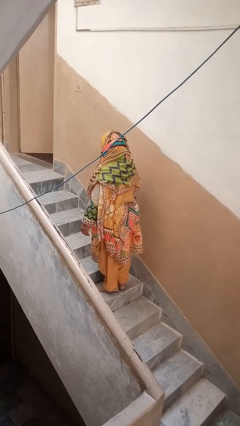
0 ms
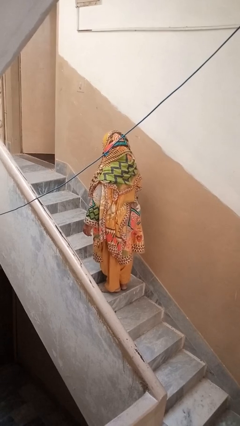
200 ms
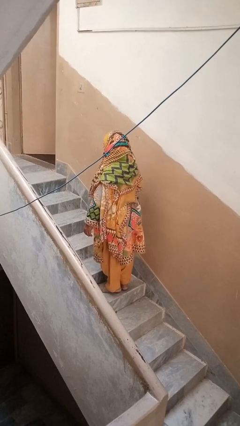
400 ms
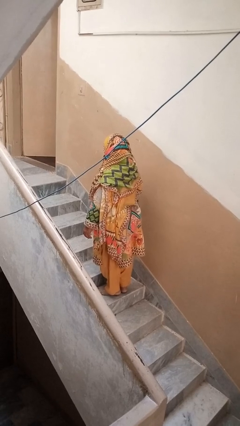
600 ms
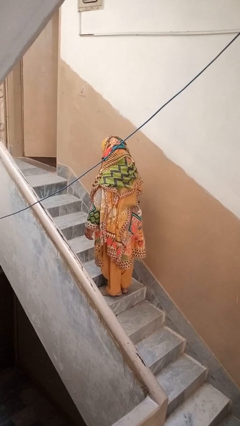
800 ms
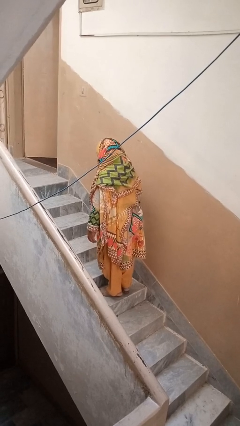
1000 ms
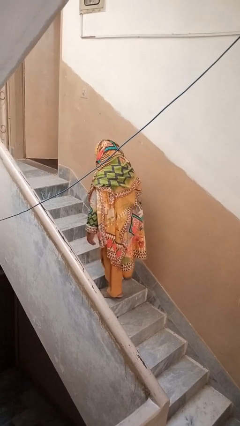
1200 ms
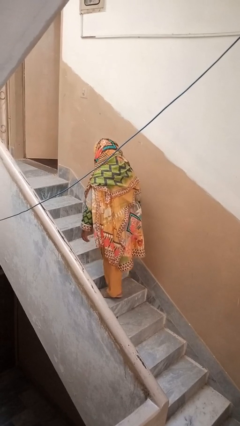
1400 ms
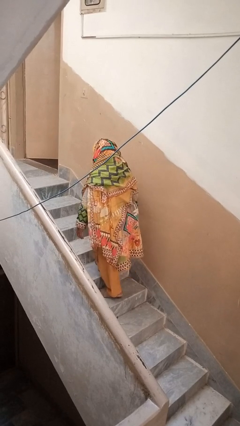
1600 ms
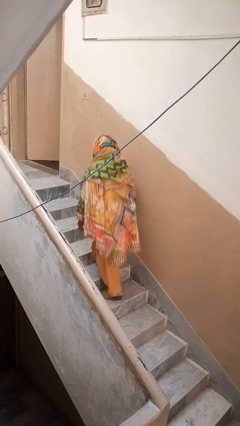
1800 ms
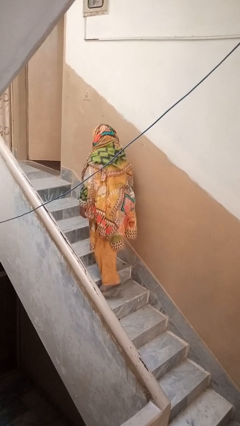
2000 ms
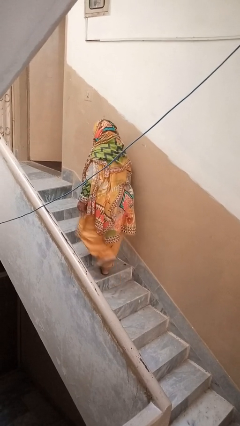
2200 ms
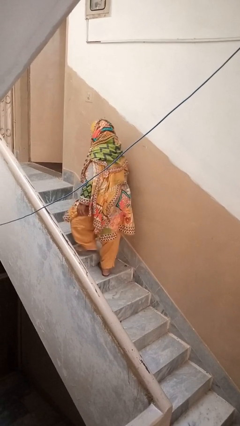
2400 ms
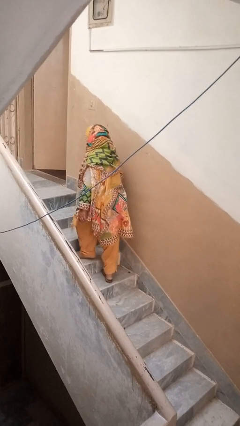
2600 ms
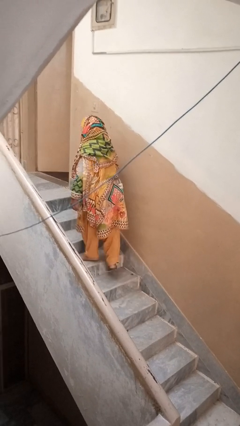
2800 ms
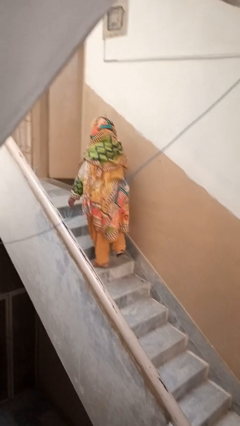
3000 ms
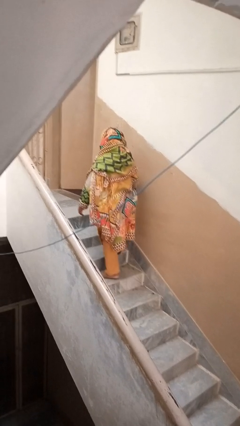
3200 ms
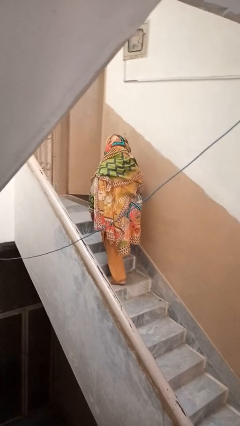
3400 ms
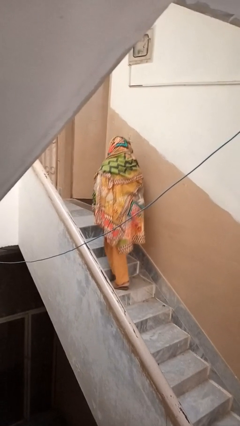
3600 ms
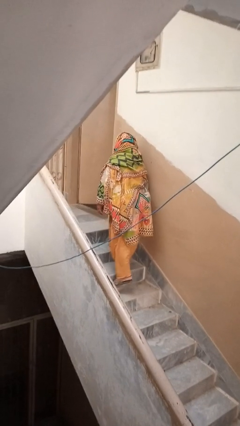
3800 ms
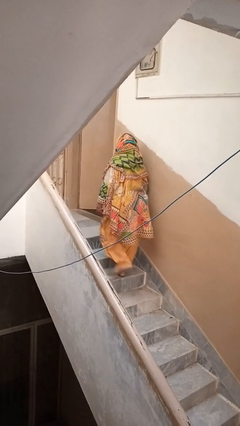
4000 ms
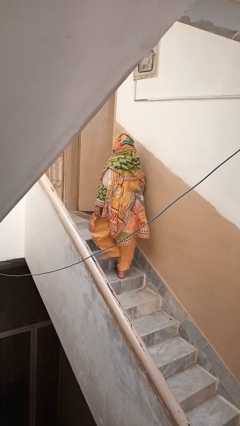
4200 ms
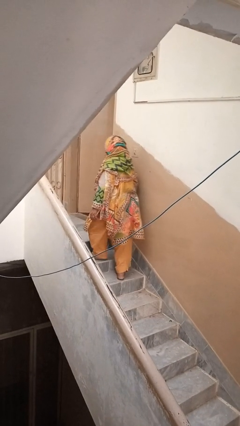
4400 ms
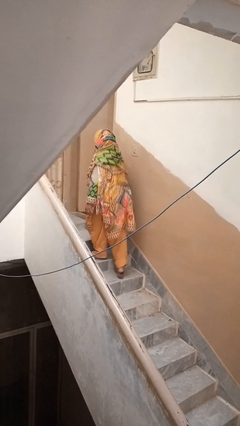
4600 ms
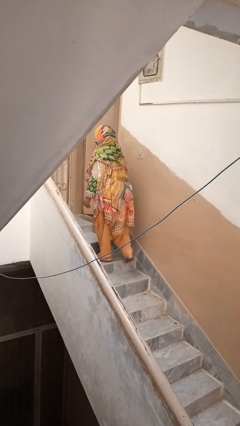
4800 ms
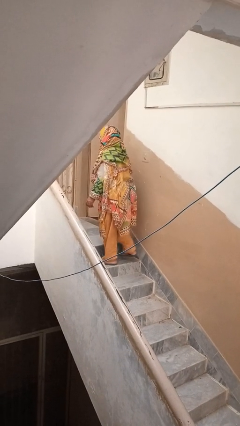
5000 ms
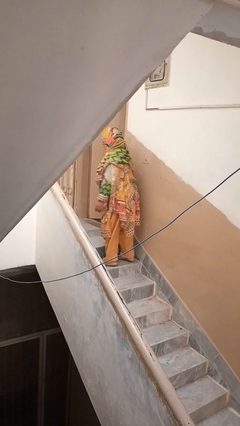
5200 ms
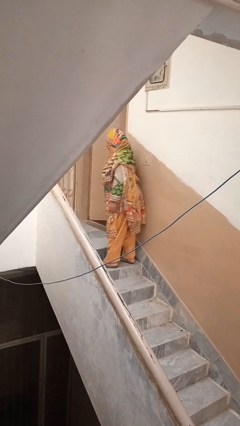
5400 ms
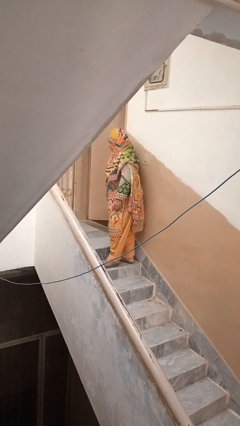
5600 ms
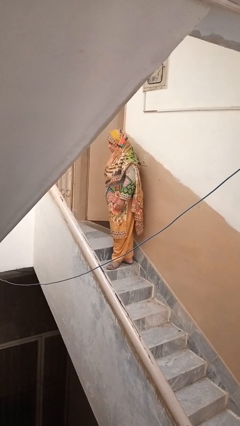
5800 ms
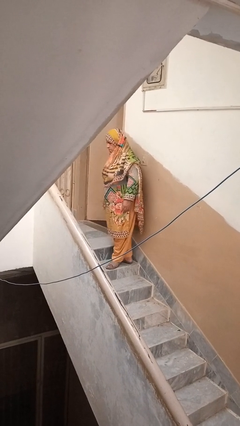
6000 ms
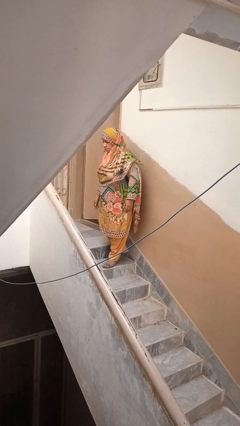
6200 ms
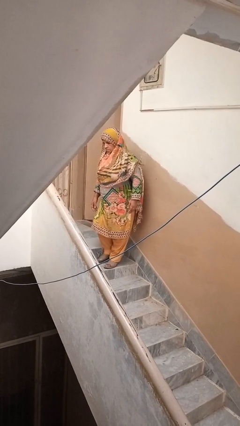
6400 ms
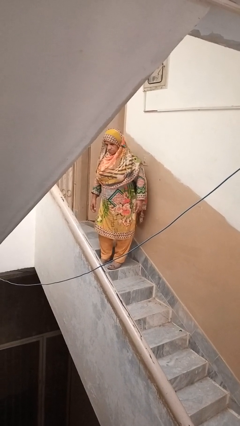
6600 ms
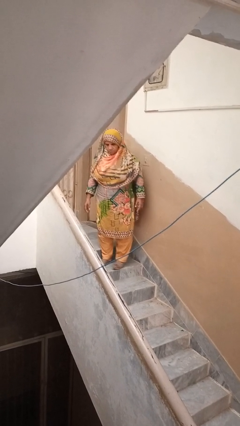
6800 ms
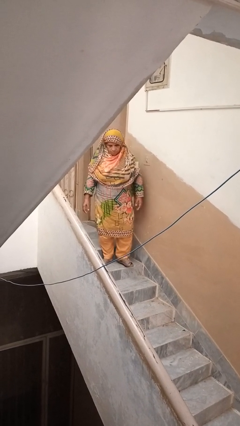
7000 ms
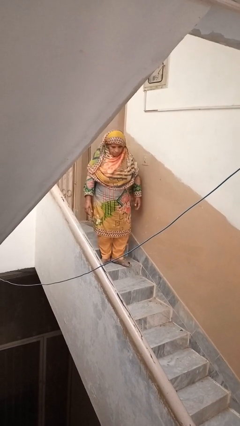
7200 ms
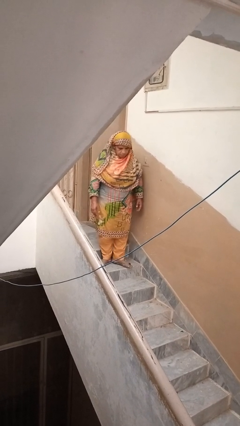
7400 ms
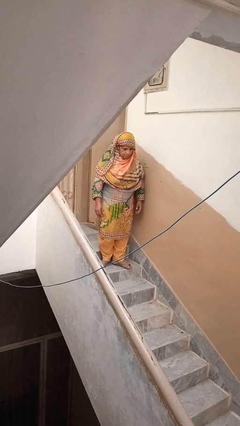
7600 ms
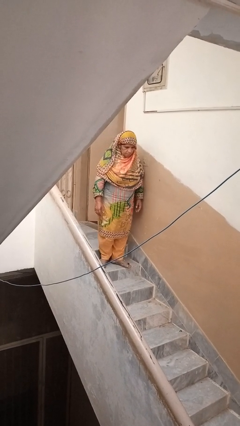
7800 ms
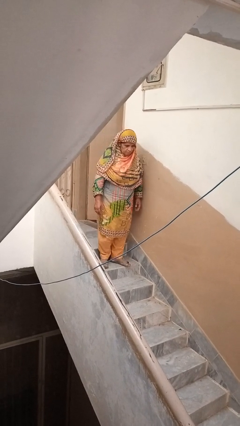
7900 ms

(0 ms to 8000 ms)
person climbs up stairs

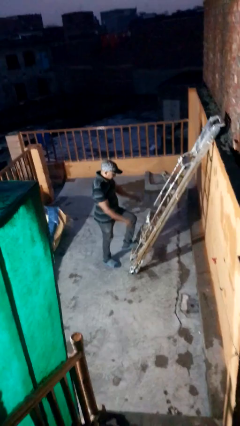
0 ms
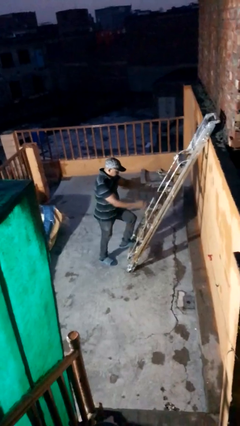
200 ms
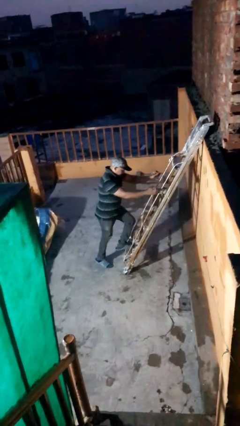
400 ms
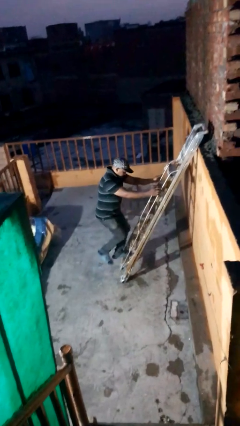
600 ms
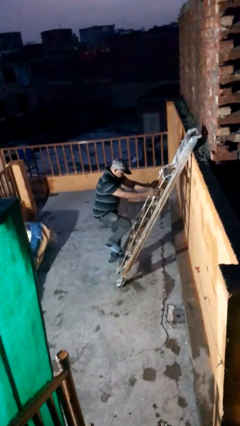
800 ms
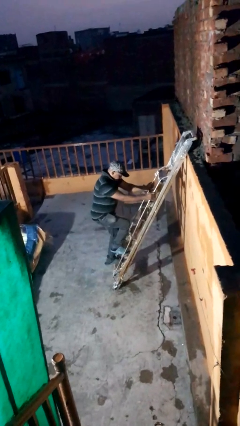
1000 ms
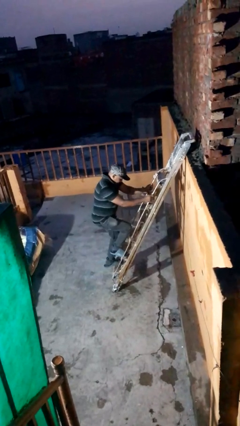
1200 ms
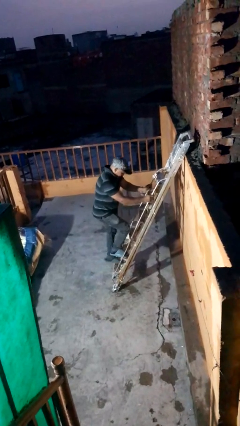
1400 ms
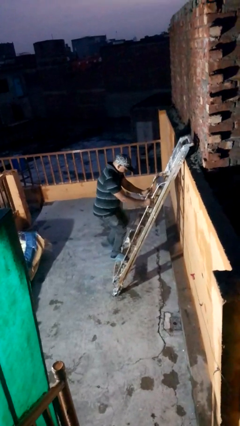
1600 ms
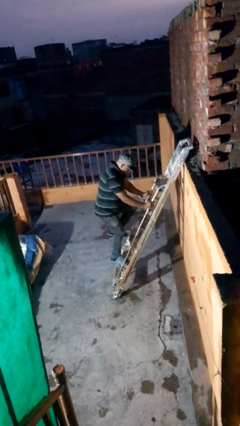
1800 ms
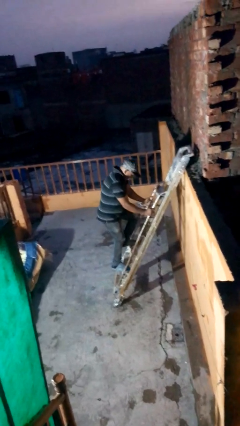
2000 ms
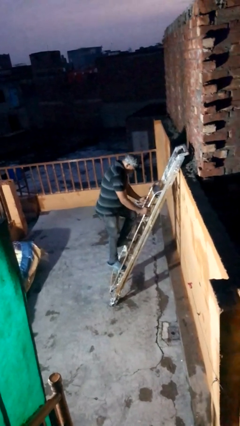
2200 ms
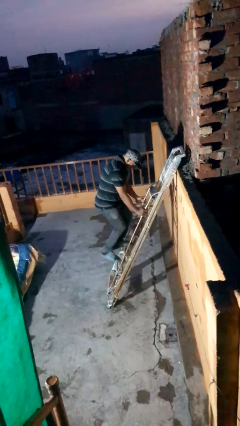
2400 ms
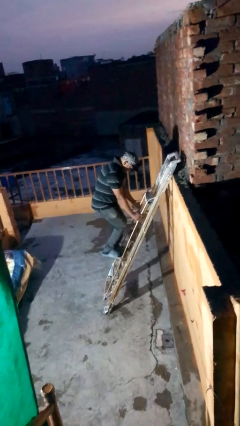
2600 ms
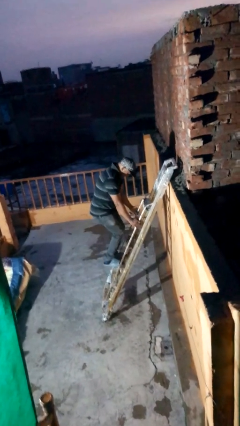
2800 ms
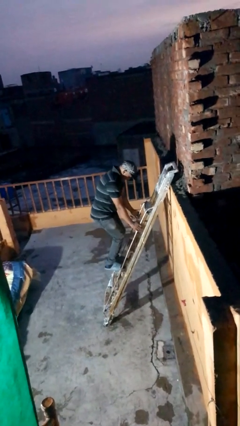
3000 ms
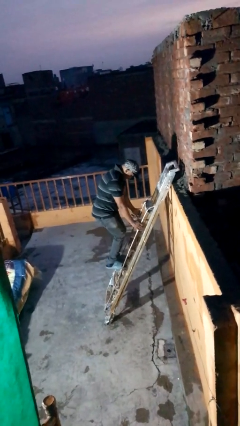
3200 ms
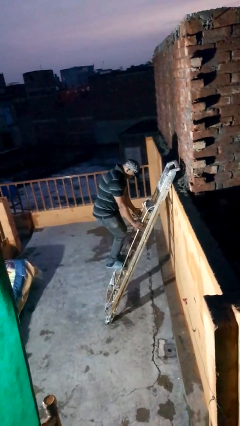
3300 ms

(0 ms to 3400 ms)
person climbs up ladder

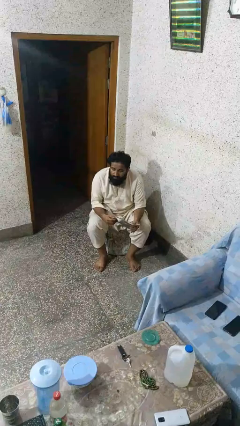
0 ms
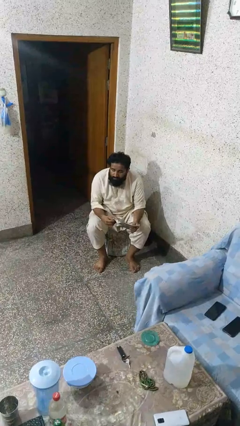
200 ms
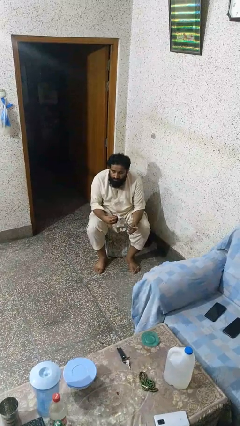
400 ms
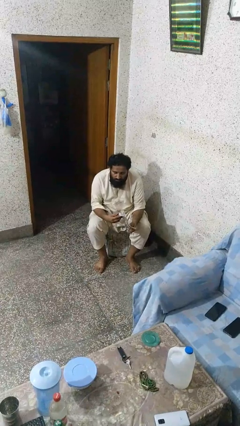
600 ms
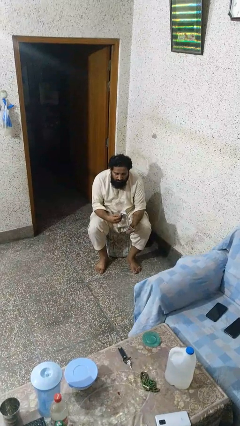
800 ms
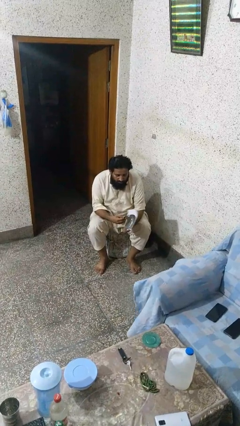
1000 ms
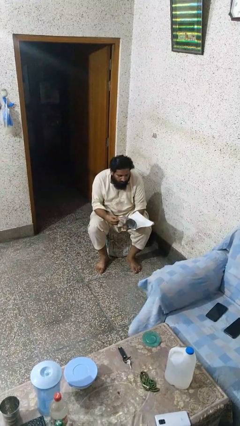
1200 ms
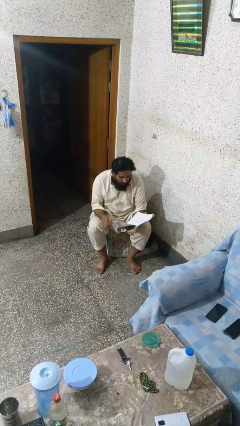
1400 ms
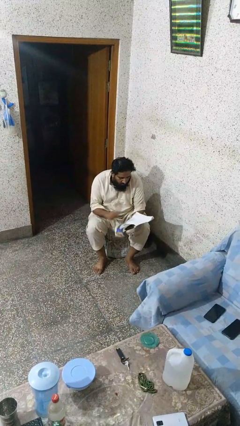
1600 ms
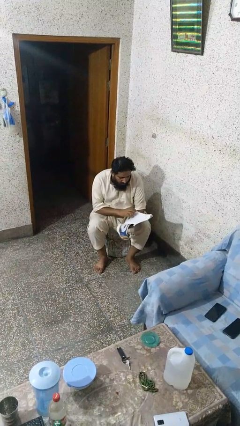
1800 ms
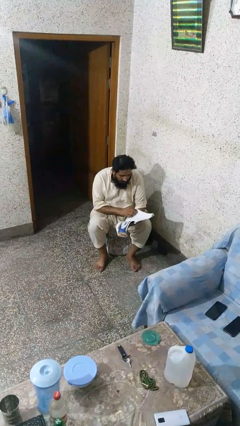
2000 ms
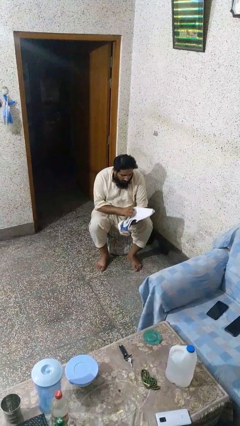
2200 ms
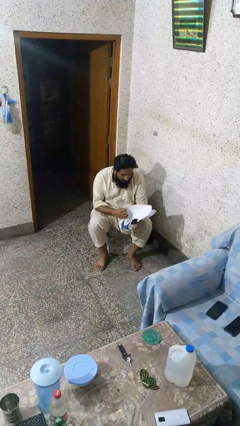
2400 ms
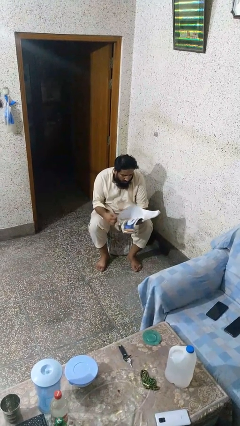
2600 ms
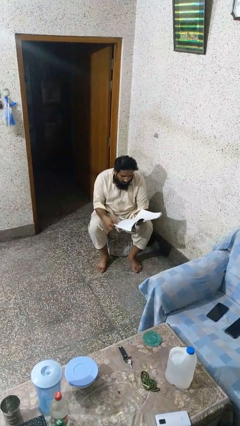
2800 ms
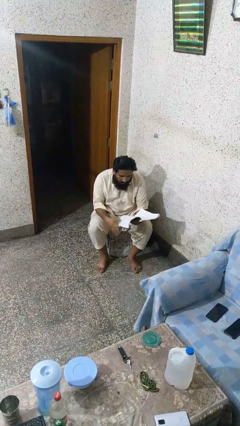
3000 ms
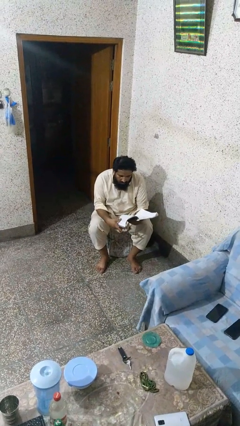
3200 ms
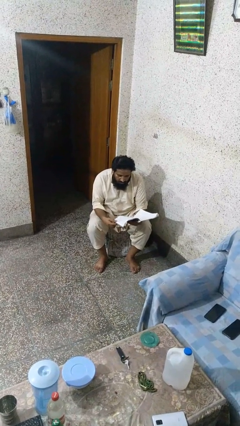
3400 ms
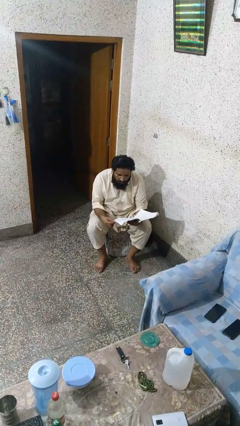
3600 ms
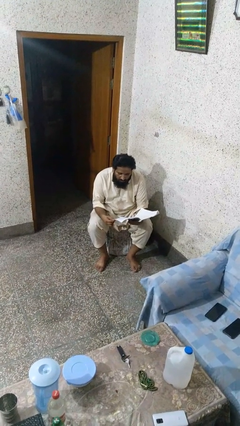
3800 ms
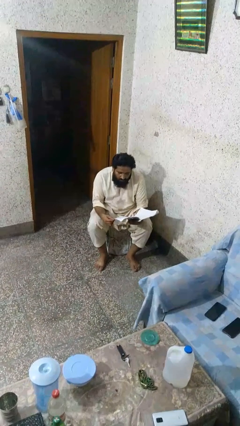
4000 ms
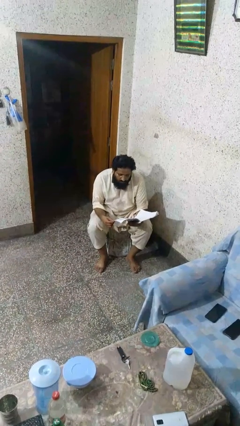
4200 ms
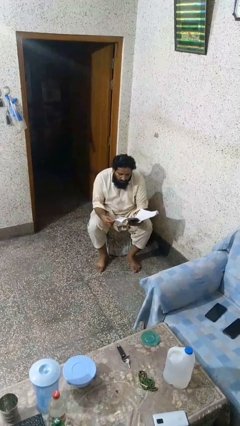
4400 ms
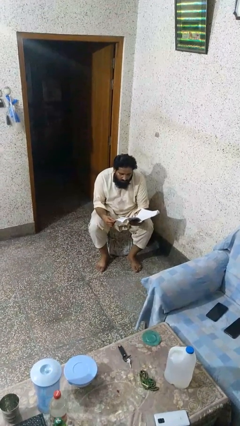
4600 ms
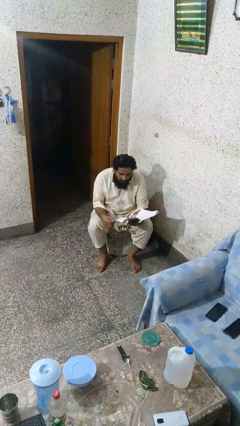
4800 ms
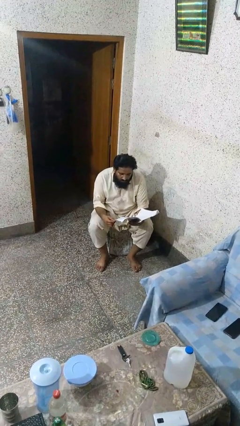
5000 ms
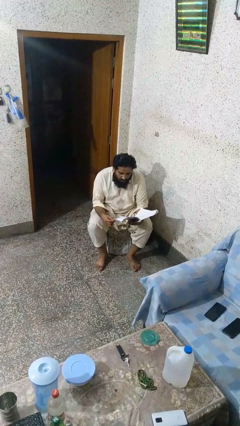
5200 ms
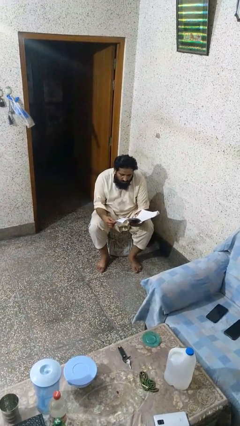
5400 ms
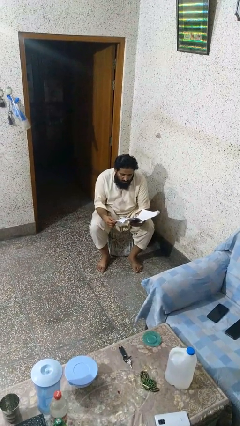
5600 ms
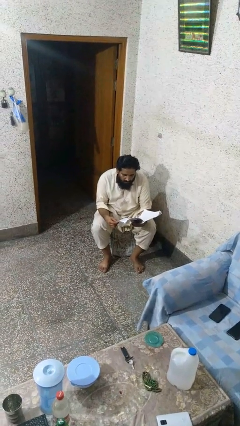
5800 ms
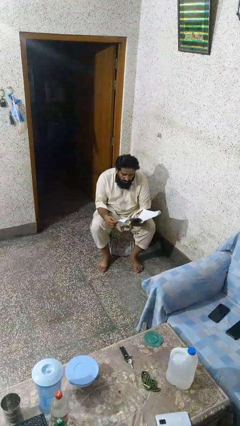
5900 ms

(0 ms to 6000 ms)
person reads magazine

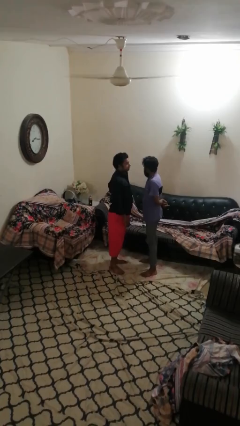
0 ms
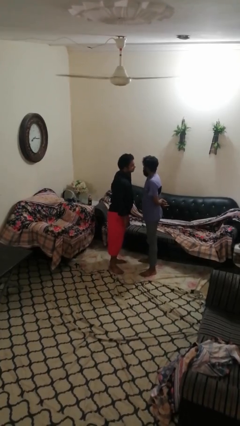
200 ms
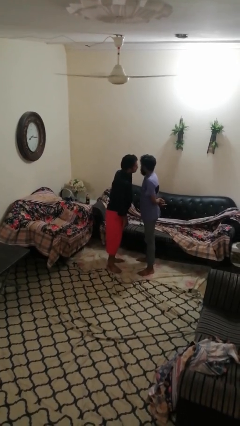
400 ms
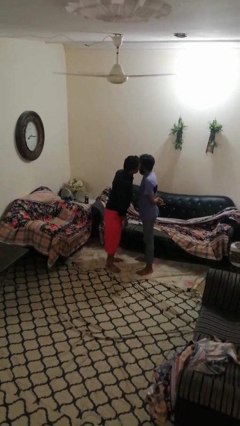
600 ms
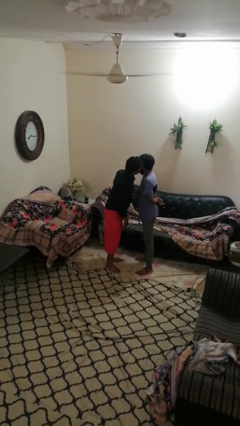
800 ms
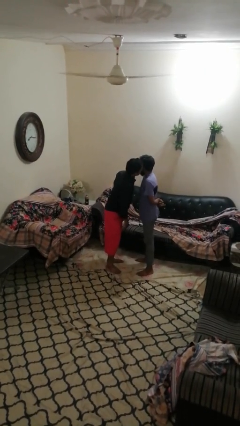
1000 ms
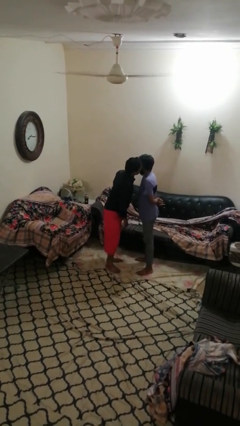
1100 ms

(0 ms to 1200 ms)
person kisses cheek of person
